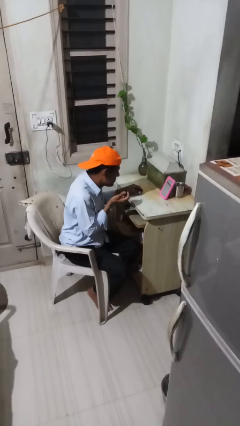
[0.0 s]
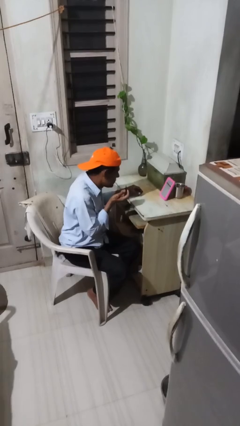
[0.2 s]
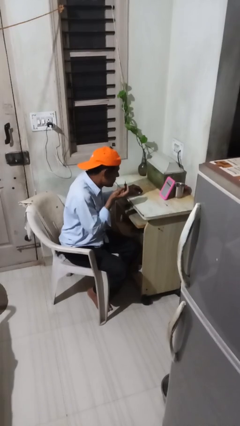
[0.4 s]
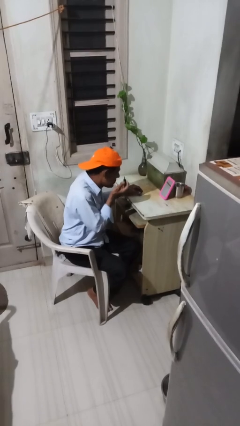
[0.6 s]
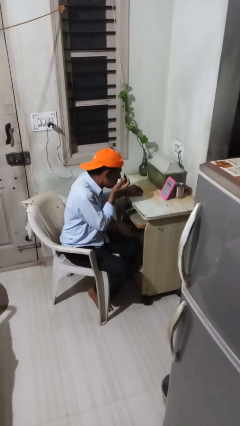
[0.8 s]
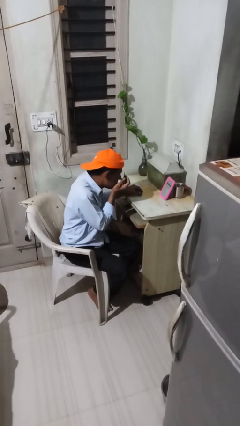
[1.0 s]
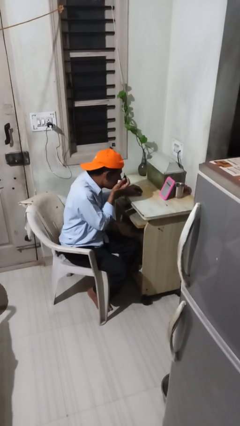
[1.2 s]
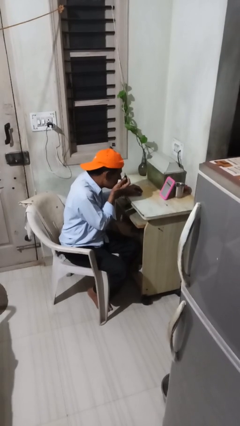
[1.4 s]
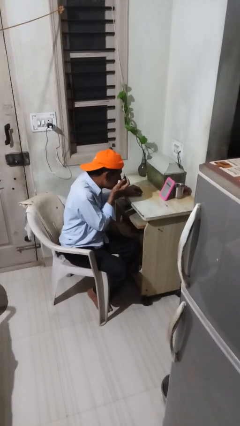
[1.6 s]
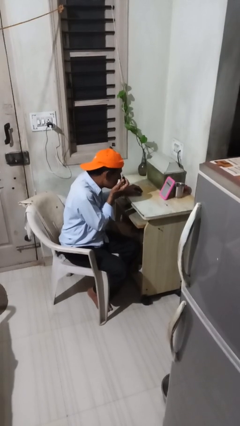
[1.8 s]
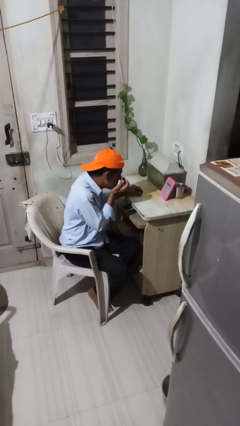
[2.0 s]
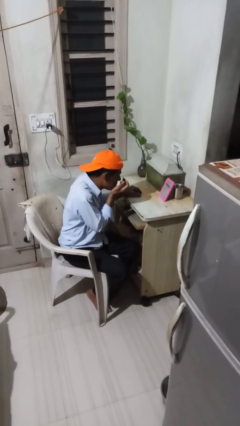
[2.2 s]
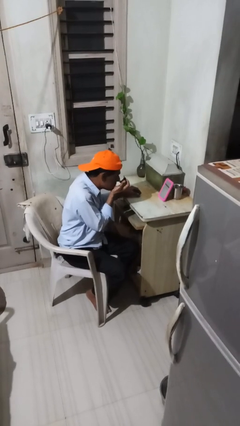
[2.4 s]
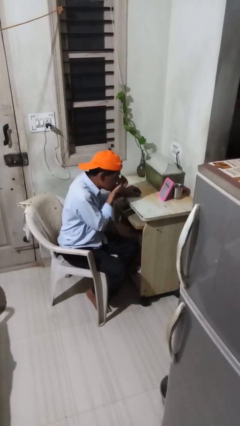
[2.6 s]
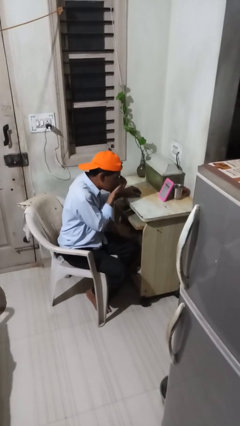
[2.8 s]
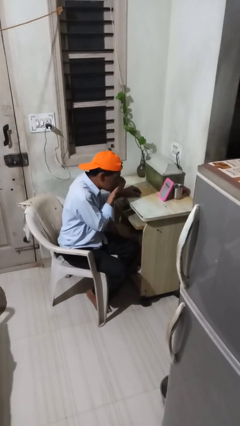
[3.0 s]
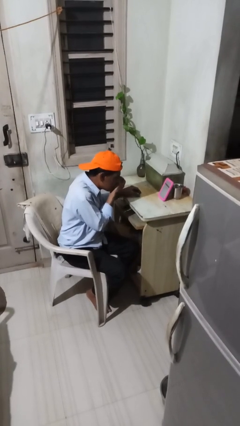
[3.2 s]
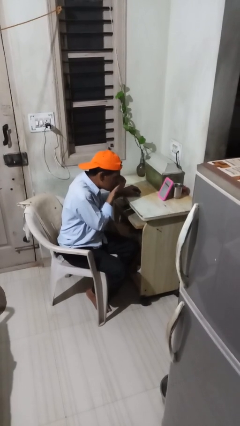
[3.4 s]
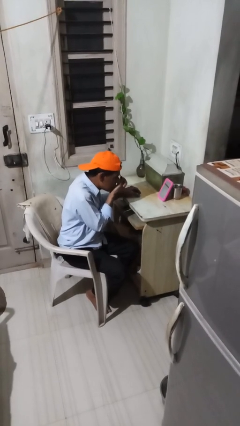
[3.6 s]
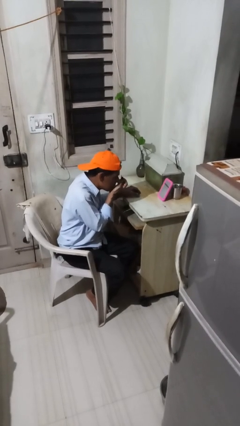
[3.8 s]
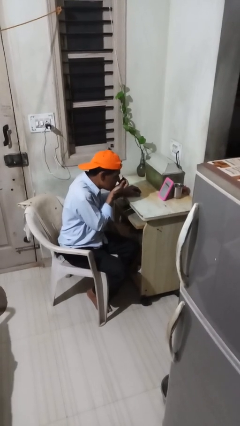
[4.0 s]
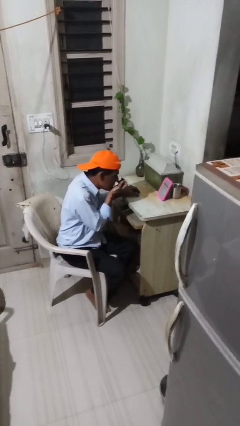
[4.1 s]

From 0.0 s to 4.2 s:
person applies eye makeup

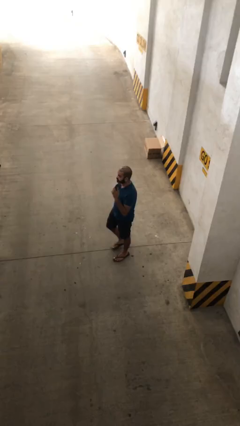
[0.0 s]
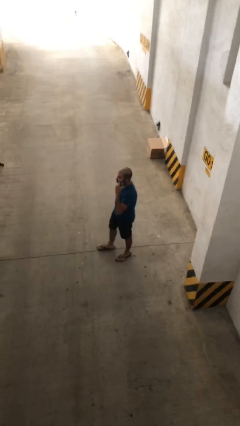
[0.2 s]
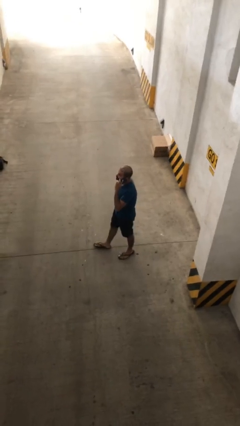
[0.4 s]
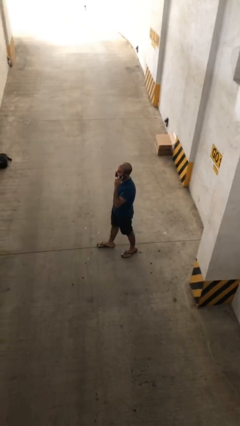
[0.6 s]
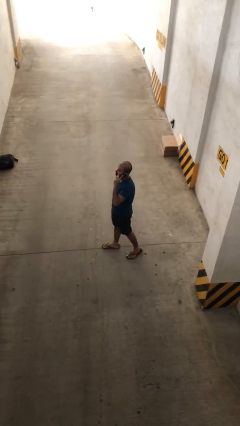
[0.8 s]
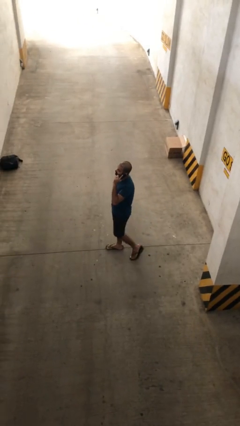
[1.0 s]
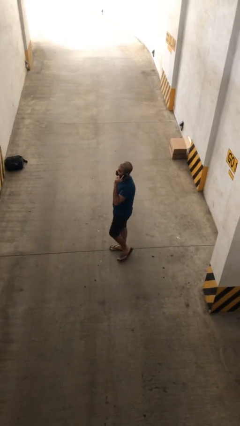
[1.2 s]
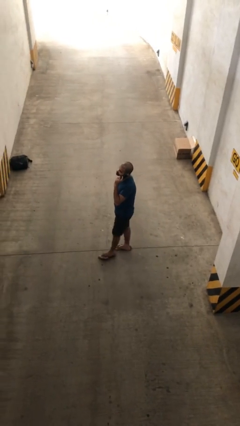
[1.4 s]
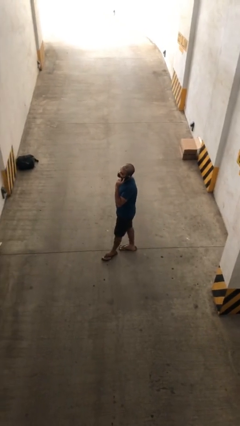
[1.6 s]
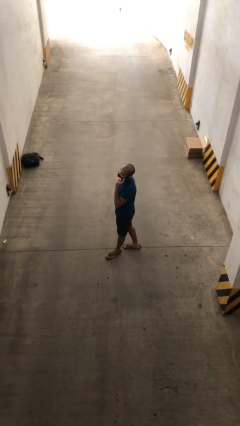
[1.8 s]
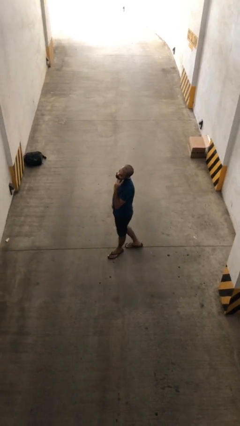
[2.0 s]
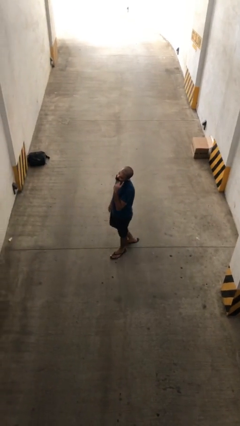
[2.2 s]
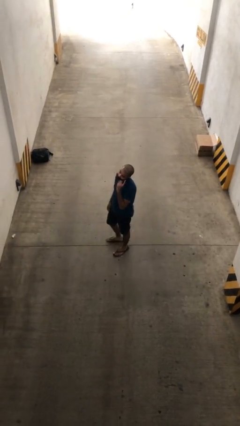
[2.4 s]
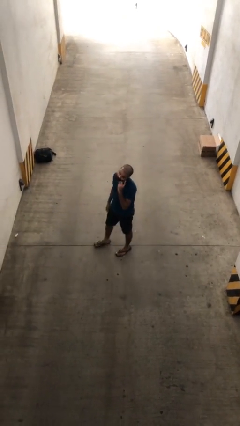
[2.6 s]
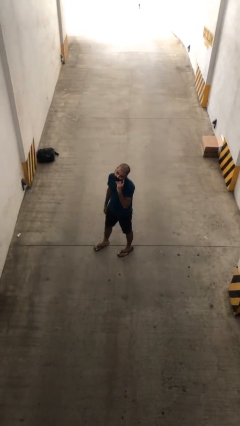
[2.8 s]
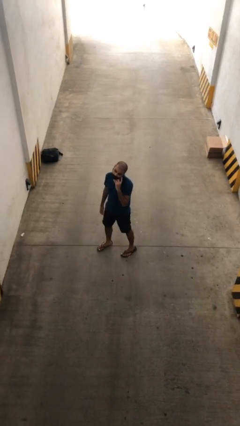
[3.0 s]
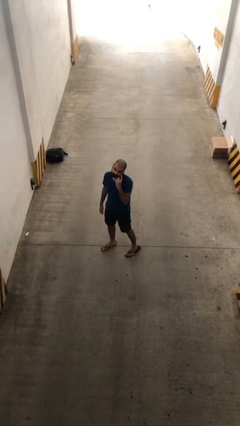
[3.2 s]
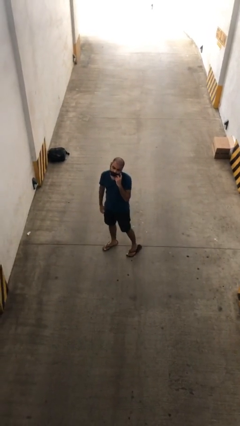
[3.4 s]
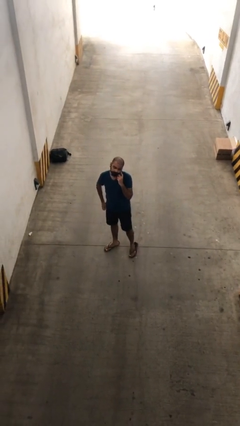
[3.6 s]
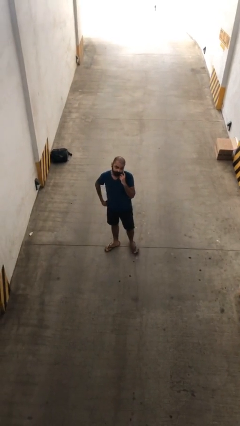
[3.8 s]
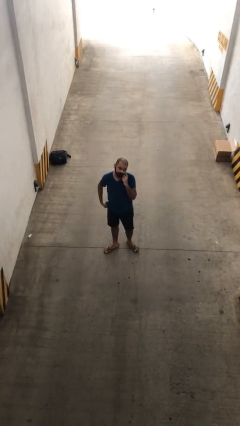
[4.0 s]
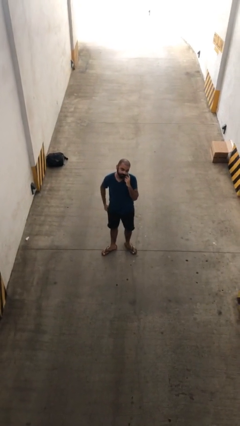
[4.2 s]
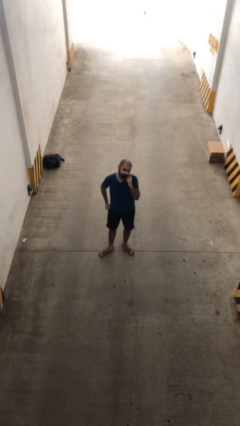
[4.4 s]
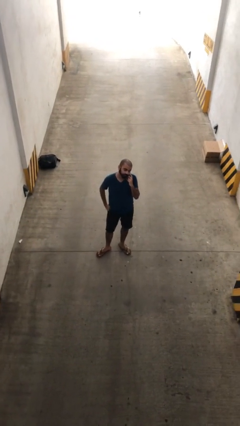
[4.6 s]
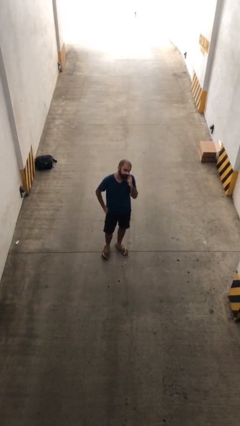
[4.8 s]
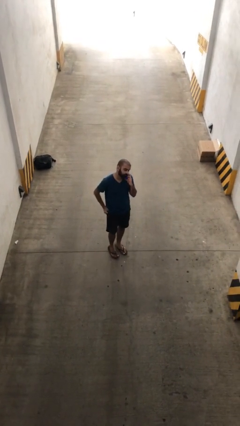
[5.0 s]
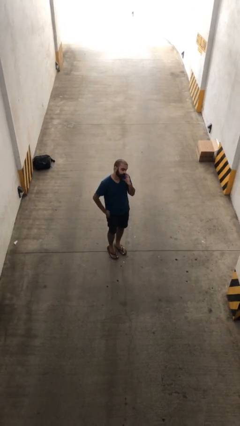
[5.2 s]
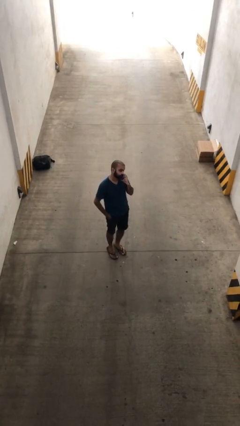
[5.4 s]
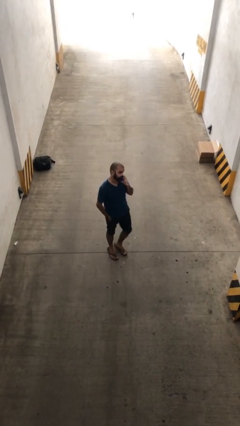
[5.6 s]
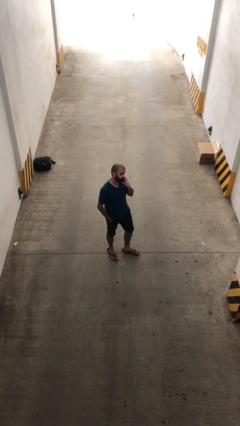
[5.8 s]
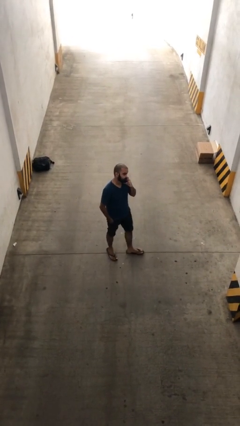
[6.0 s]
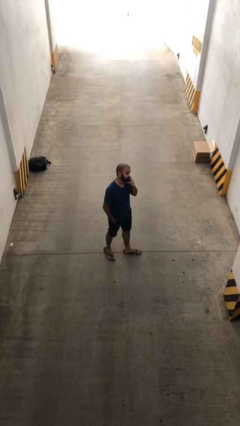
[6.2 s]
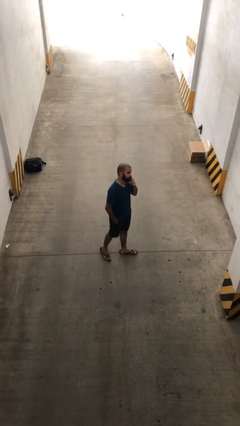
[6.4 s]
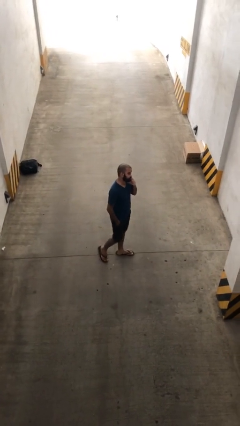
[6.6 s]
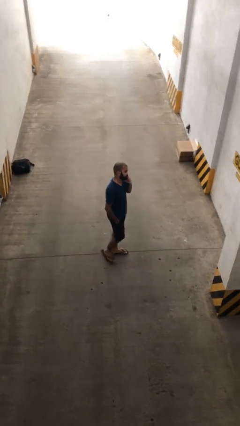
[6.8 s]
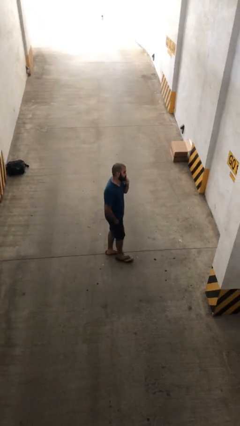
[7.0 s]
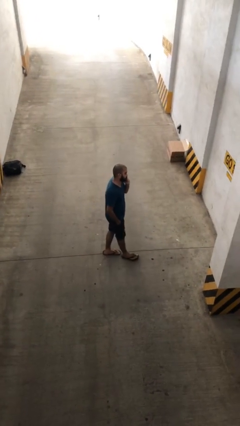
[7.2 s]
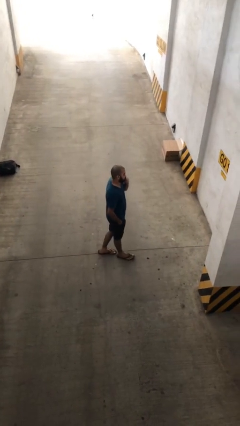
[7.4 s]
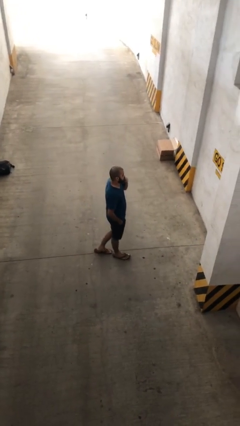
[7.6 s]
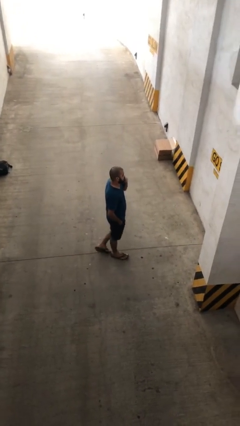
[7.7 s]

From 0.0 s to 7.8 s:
person talks on phone

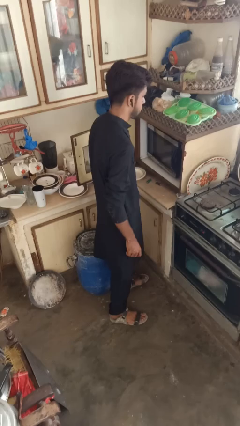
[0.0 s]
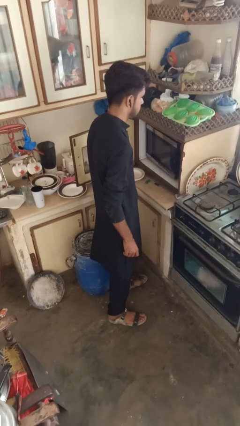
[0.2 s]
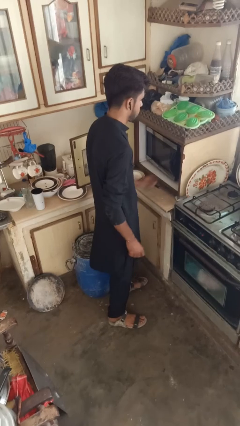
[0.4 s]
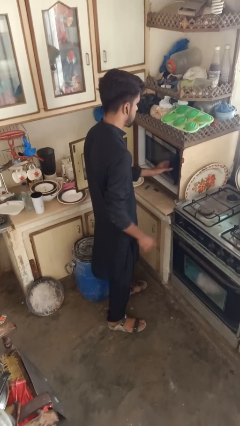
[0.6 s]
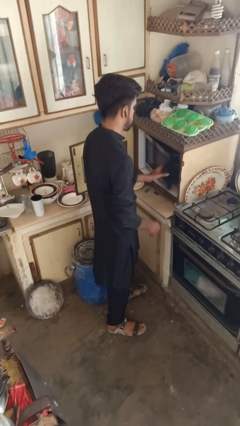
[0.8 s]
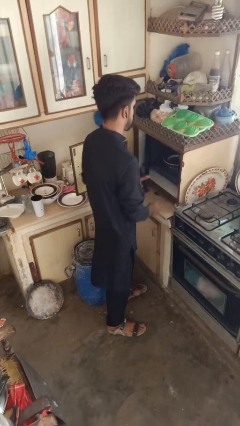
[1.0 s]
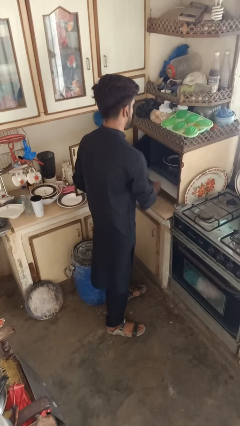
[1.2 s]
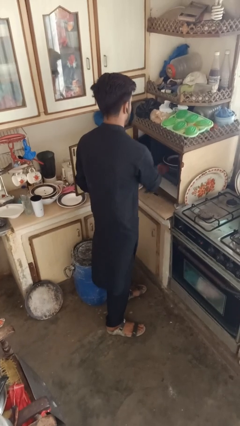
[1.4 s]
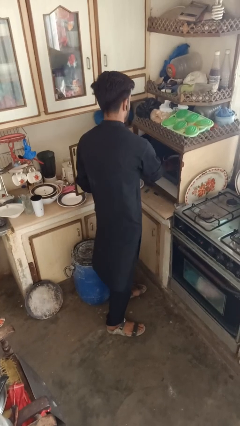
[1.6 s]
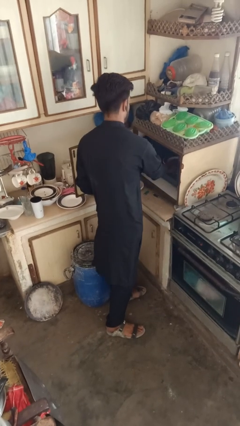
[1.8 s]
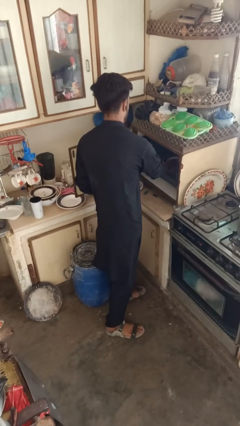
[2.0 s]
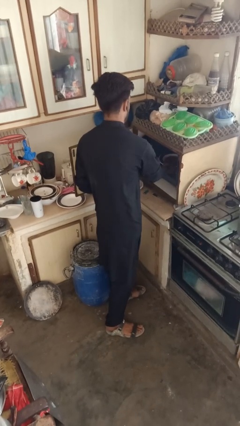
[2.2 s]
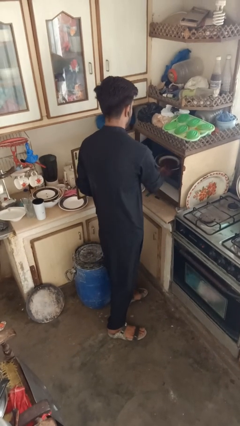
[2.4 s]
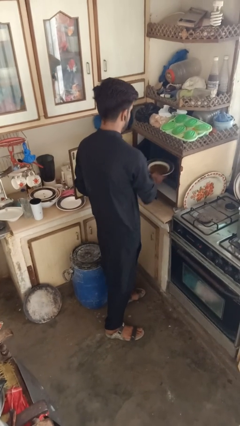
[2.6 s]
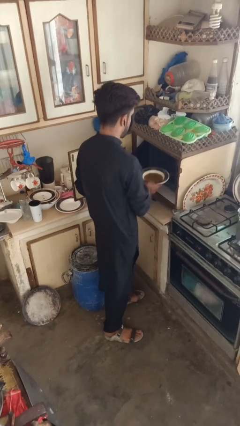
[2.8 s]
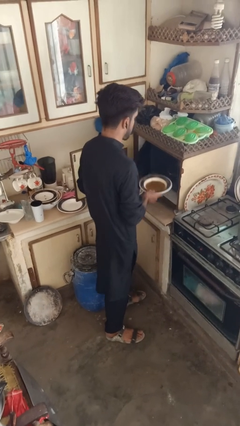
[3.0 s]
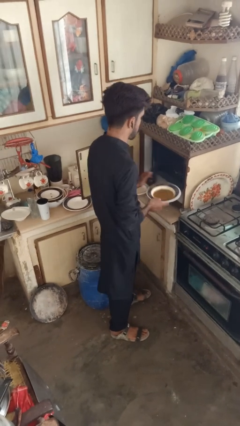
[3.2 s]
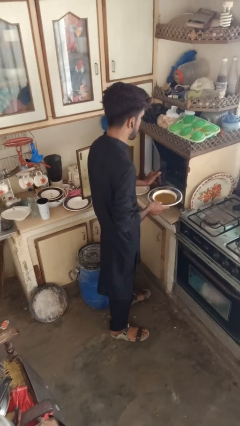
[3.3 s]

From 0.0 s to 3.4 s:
person takes object from microwave

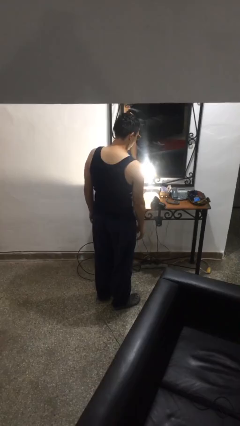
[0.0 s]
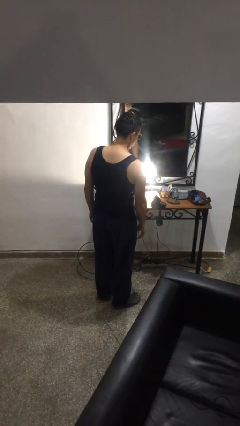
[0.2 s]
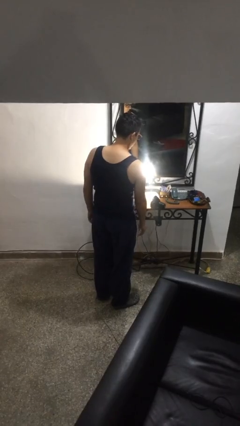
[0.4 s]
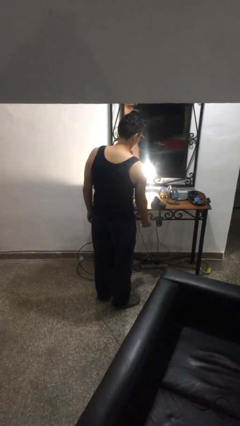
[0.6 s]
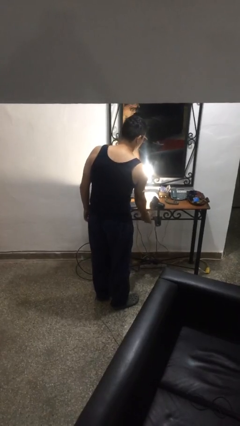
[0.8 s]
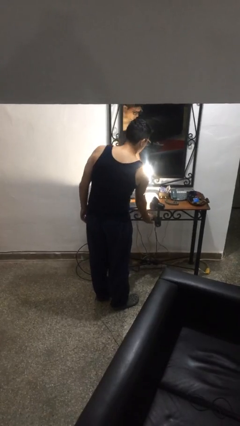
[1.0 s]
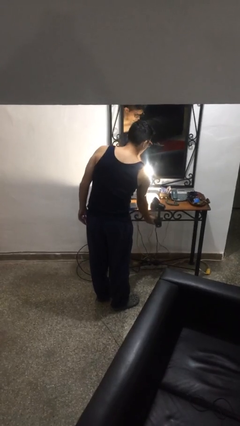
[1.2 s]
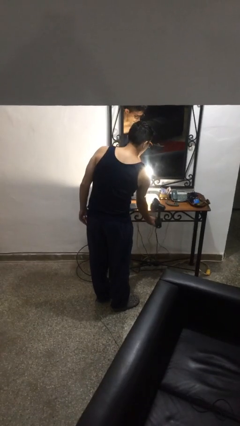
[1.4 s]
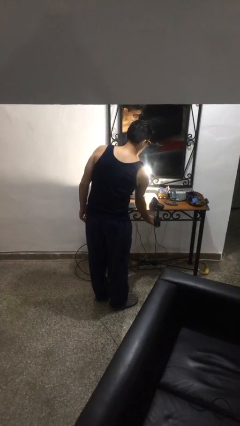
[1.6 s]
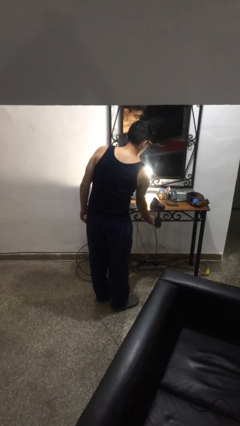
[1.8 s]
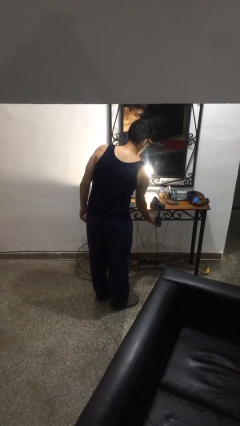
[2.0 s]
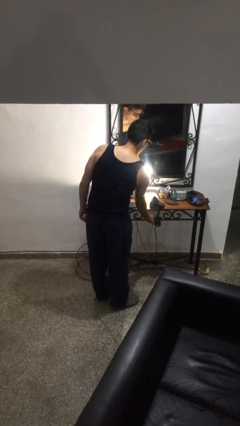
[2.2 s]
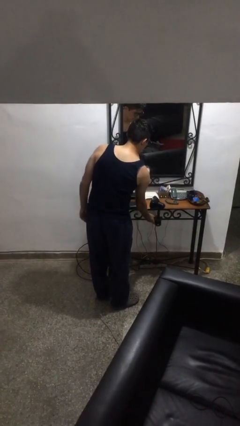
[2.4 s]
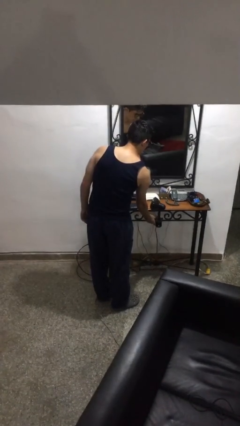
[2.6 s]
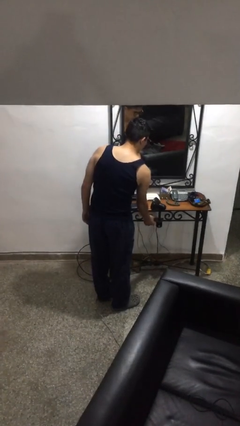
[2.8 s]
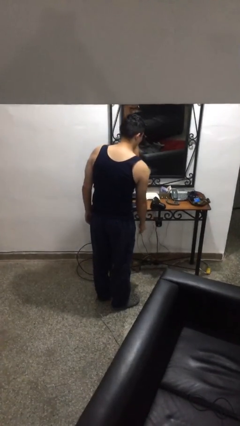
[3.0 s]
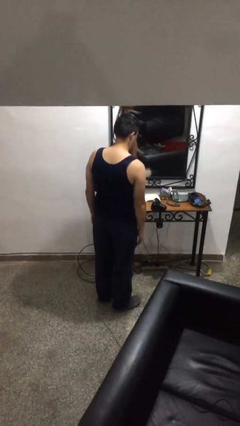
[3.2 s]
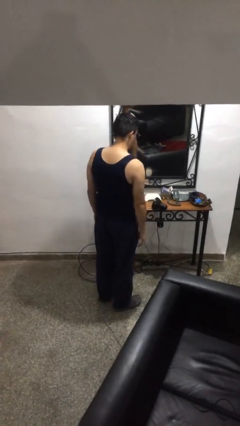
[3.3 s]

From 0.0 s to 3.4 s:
person turns off lamp
